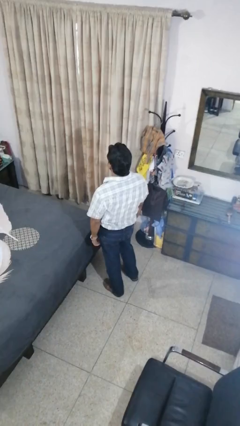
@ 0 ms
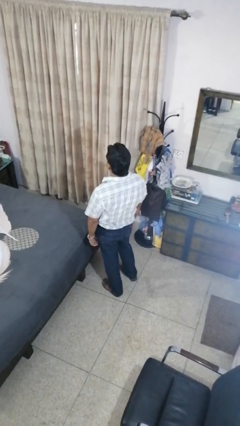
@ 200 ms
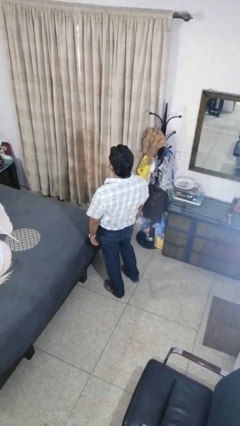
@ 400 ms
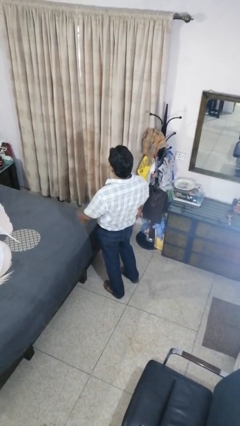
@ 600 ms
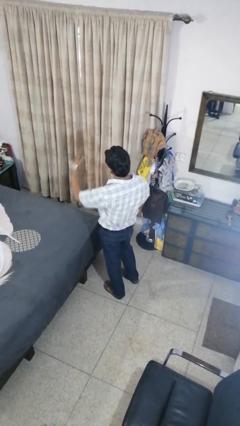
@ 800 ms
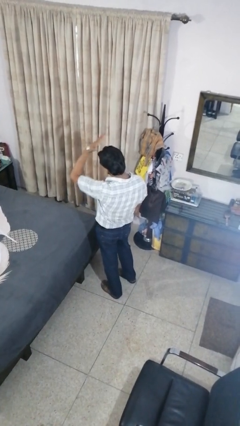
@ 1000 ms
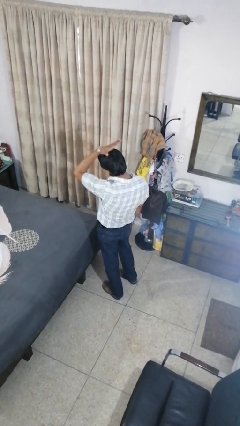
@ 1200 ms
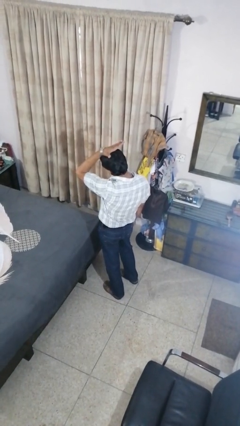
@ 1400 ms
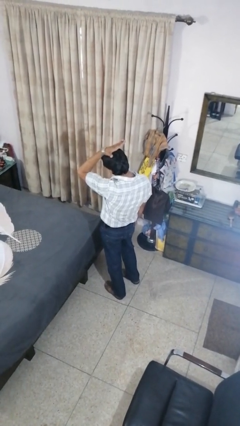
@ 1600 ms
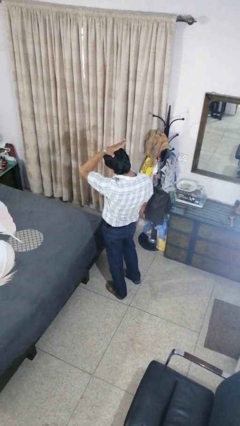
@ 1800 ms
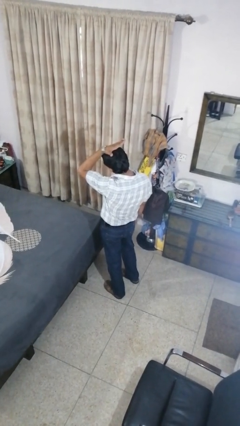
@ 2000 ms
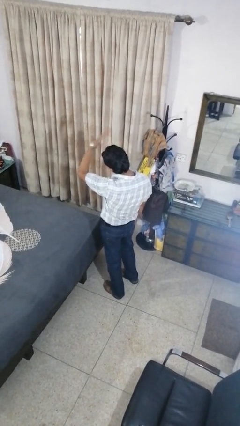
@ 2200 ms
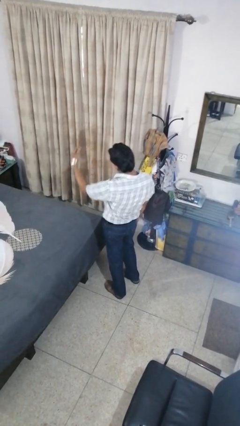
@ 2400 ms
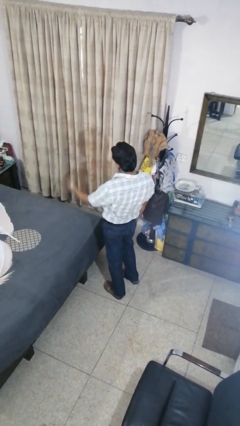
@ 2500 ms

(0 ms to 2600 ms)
person pats head

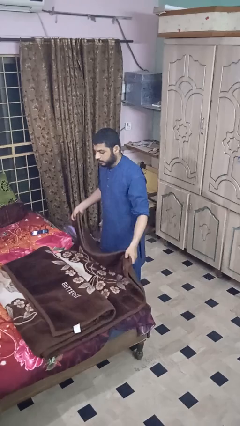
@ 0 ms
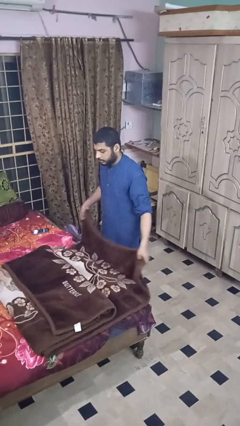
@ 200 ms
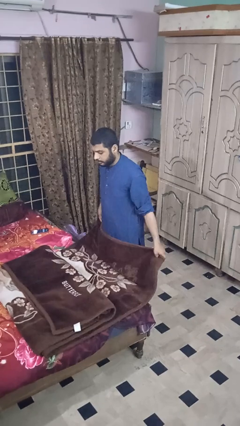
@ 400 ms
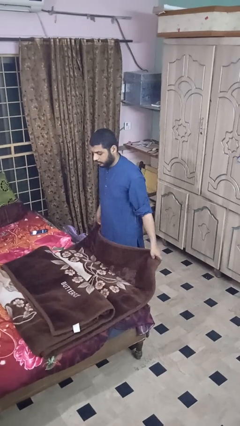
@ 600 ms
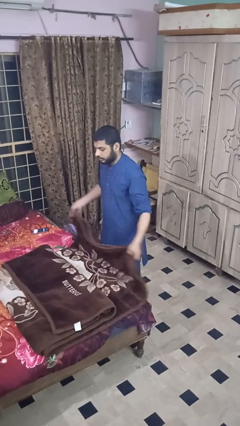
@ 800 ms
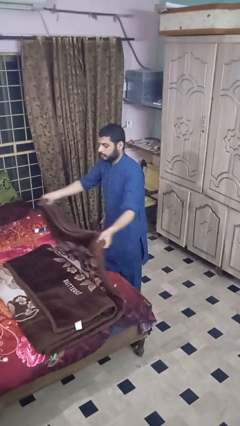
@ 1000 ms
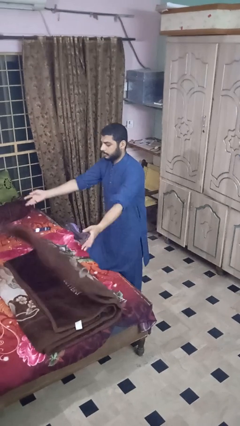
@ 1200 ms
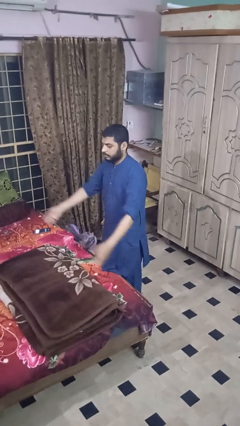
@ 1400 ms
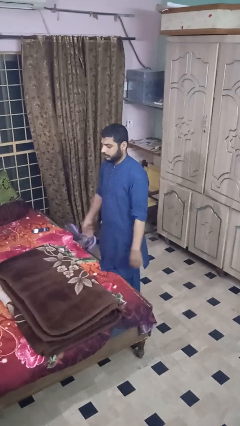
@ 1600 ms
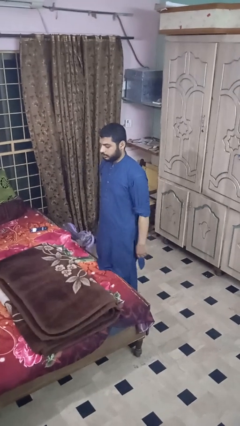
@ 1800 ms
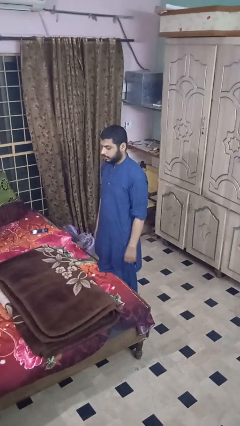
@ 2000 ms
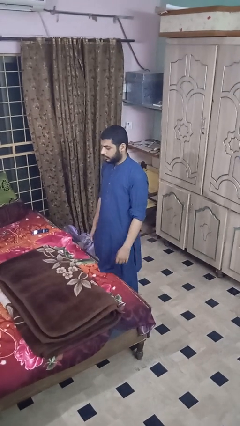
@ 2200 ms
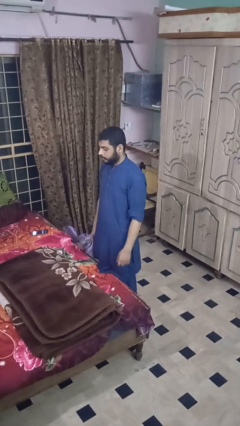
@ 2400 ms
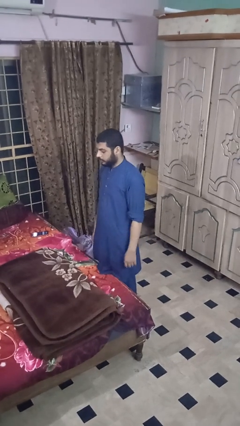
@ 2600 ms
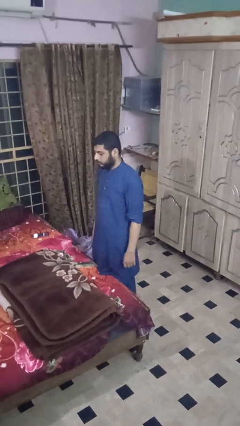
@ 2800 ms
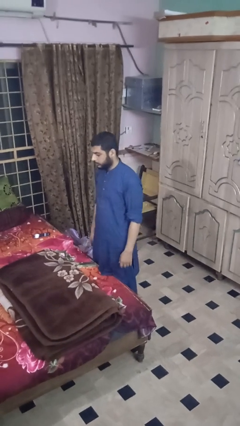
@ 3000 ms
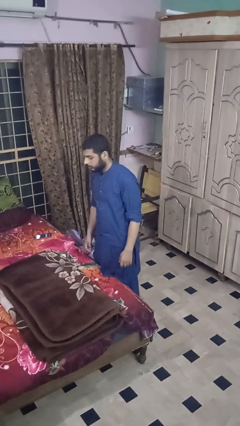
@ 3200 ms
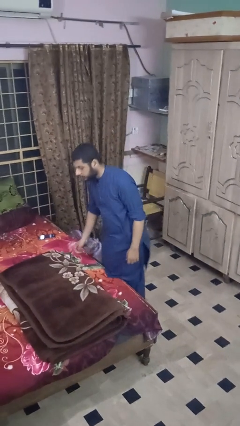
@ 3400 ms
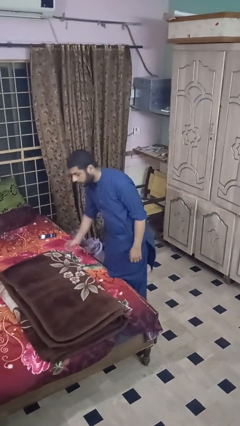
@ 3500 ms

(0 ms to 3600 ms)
person folds blanket

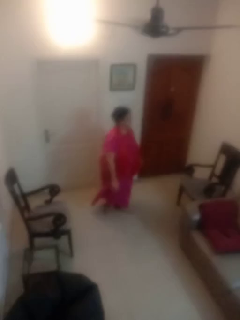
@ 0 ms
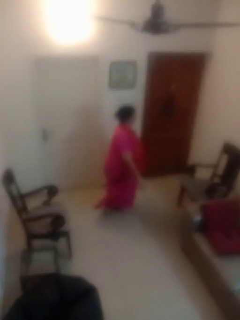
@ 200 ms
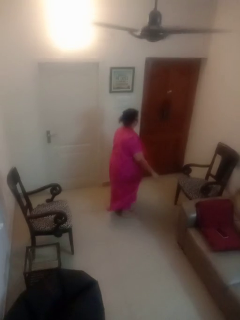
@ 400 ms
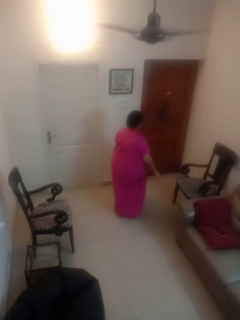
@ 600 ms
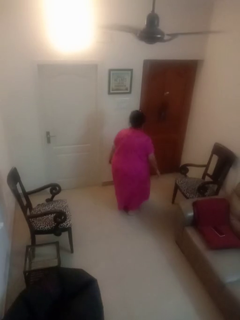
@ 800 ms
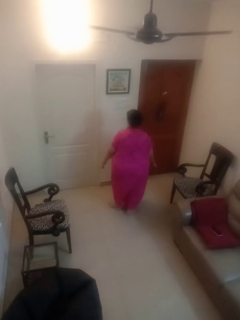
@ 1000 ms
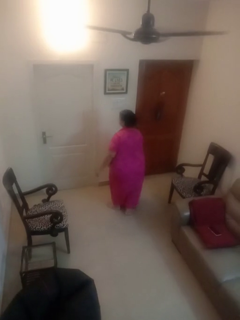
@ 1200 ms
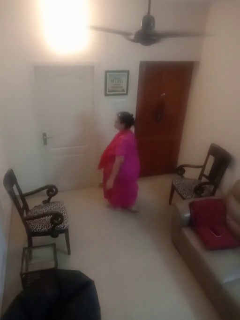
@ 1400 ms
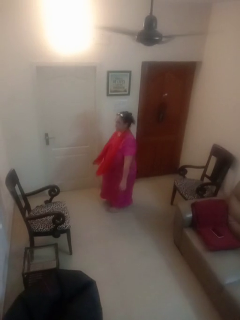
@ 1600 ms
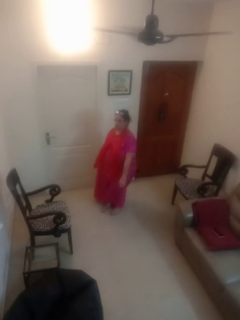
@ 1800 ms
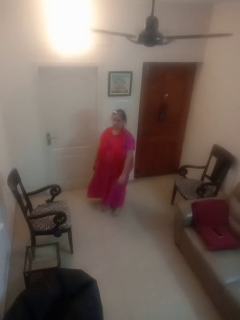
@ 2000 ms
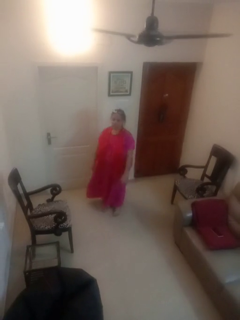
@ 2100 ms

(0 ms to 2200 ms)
person twirls

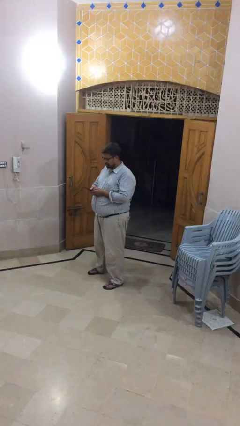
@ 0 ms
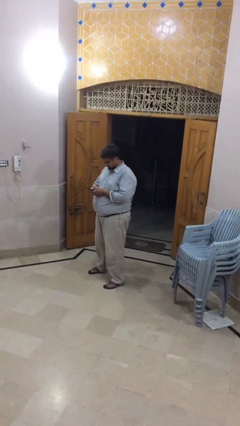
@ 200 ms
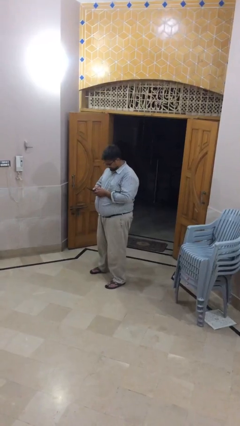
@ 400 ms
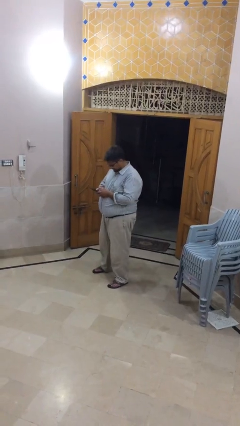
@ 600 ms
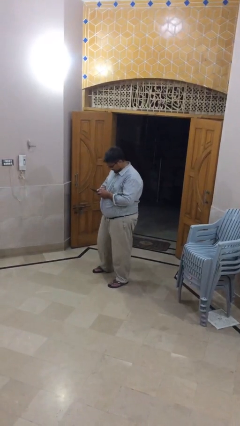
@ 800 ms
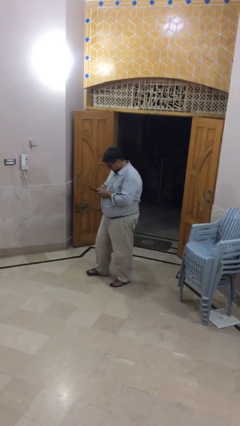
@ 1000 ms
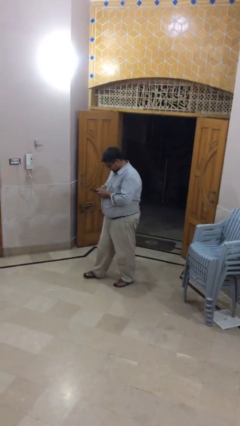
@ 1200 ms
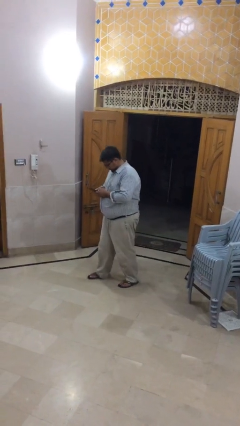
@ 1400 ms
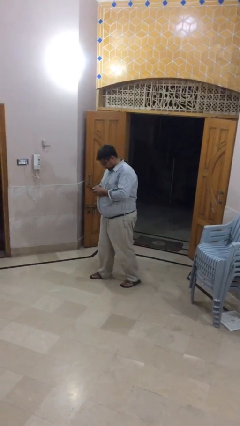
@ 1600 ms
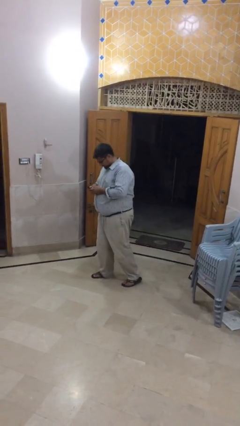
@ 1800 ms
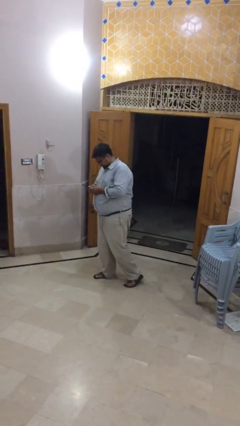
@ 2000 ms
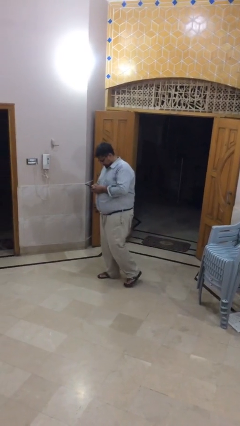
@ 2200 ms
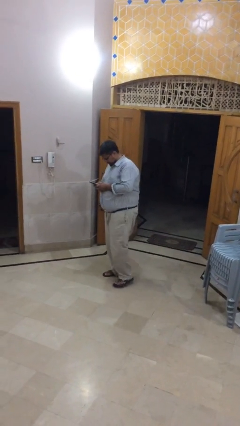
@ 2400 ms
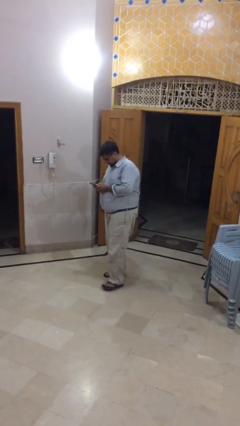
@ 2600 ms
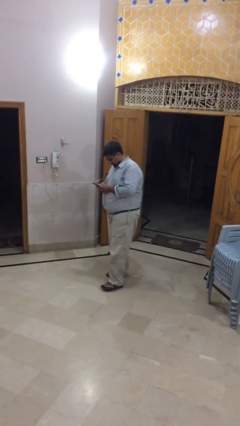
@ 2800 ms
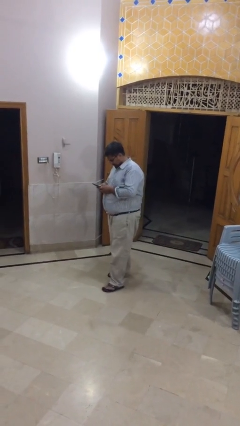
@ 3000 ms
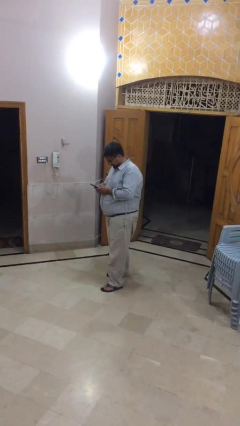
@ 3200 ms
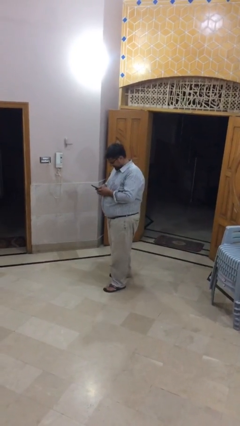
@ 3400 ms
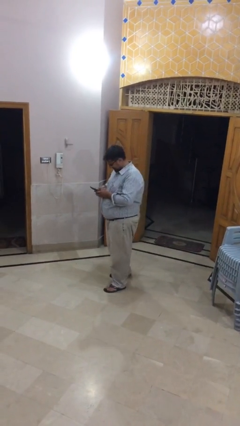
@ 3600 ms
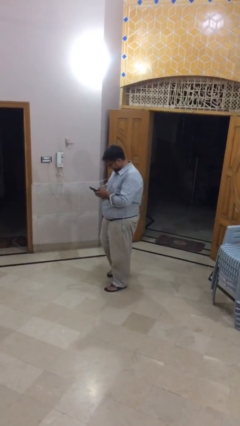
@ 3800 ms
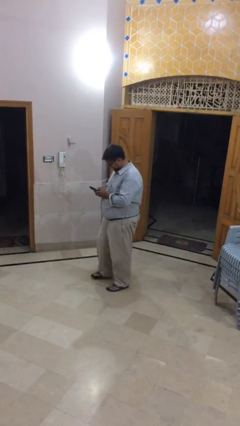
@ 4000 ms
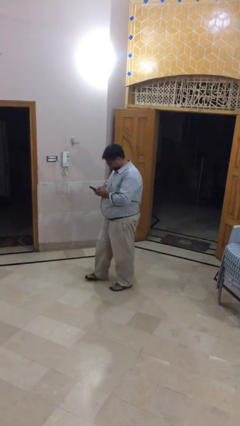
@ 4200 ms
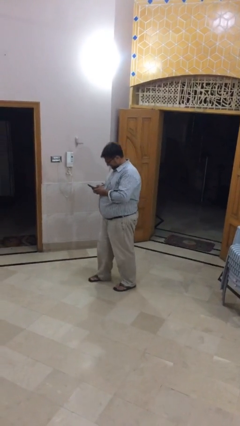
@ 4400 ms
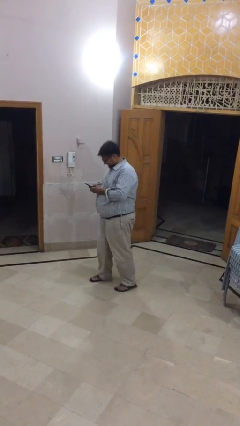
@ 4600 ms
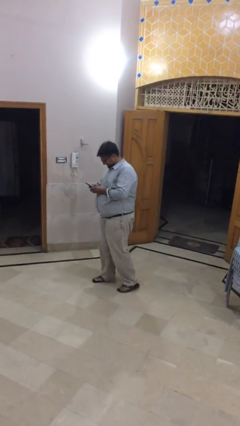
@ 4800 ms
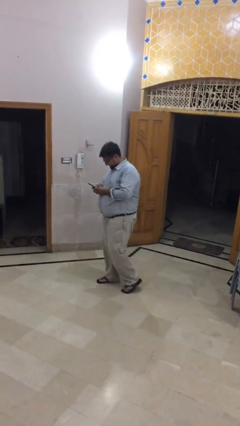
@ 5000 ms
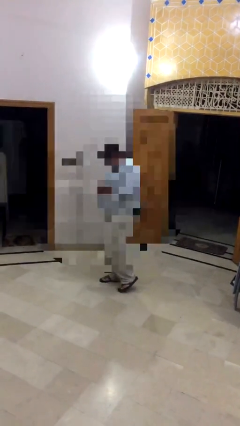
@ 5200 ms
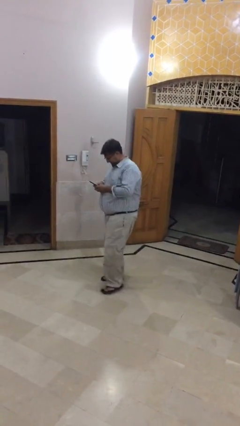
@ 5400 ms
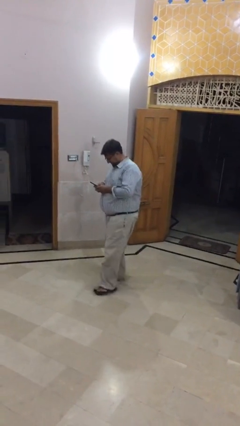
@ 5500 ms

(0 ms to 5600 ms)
person texts on phone

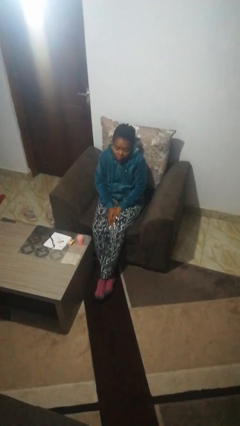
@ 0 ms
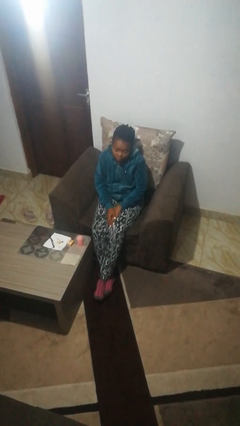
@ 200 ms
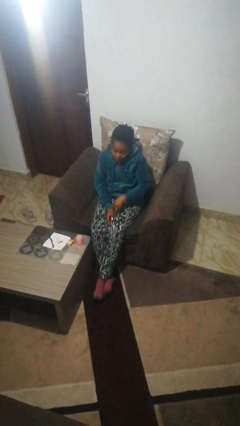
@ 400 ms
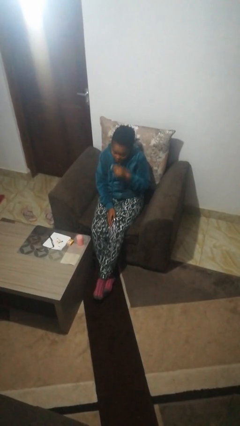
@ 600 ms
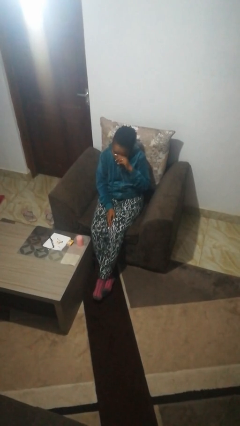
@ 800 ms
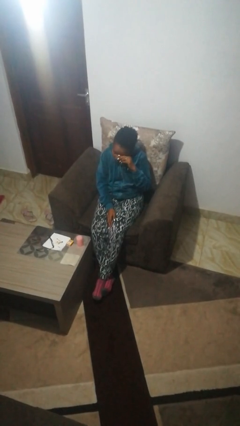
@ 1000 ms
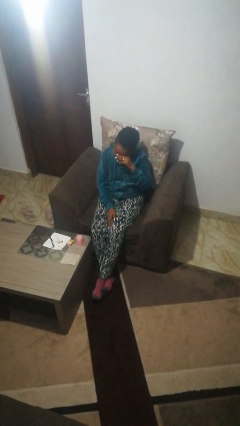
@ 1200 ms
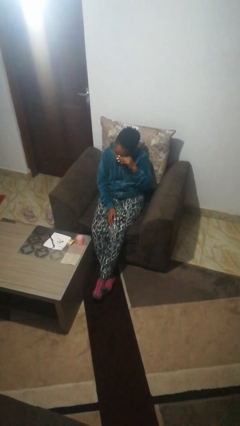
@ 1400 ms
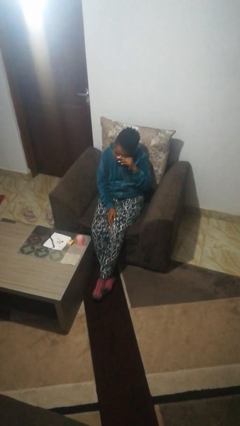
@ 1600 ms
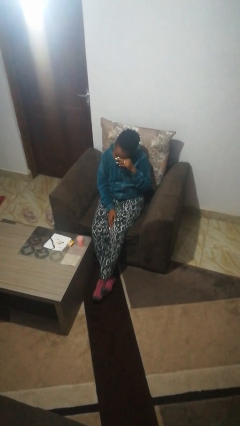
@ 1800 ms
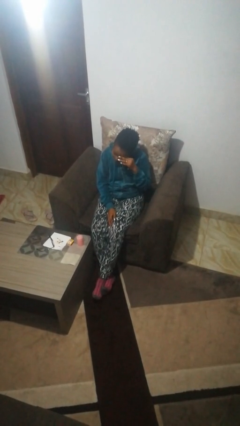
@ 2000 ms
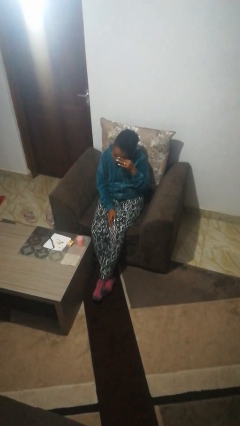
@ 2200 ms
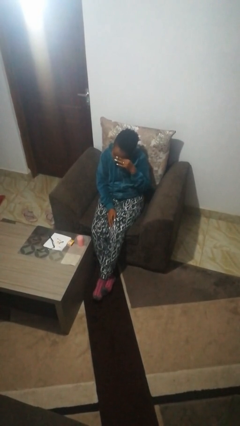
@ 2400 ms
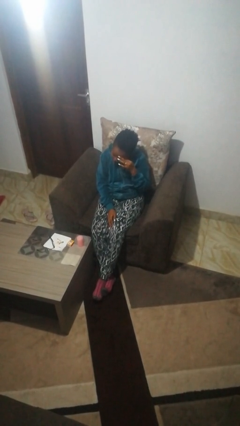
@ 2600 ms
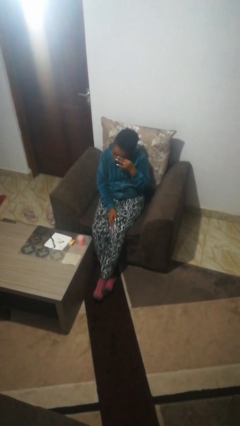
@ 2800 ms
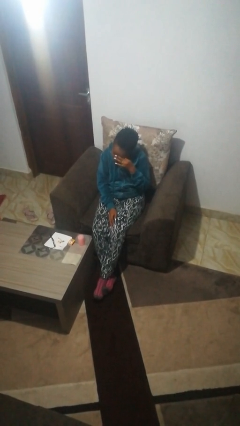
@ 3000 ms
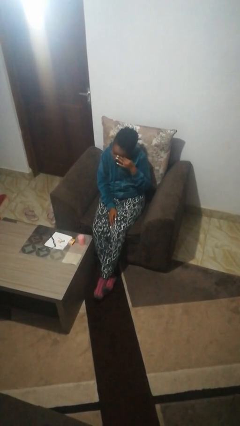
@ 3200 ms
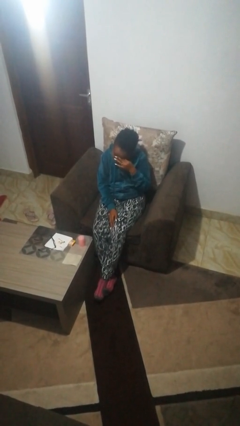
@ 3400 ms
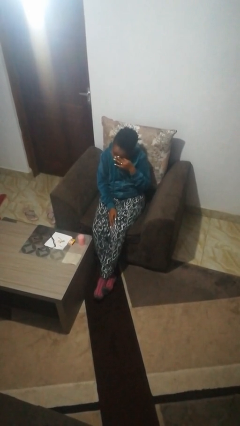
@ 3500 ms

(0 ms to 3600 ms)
person rubs eyes
